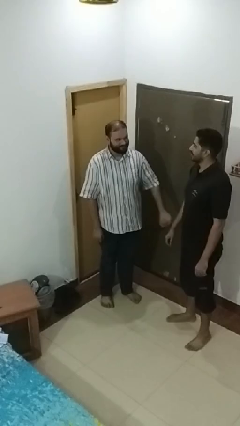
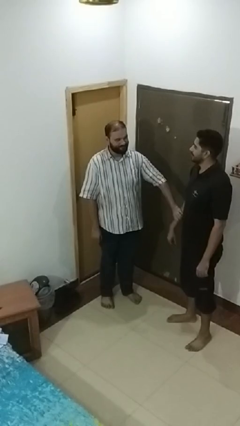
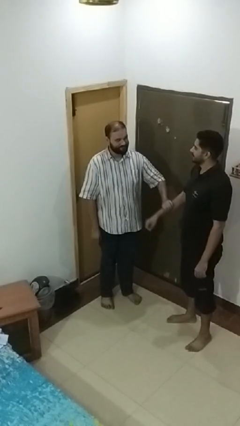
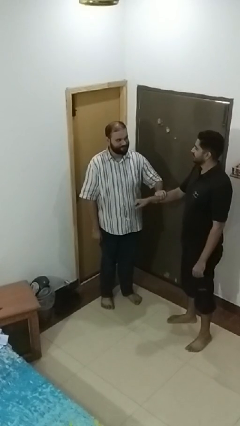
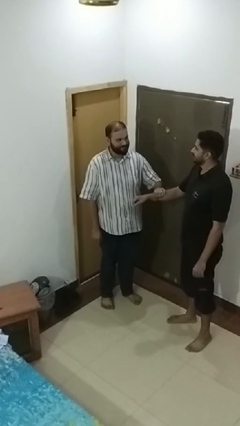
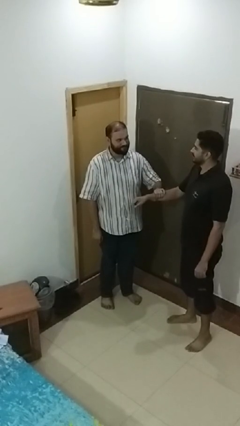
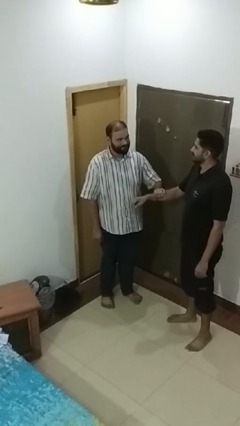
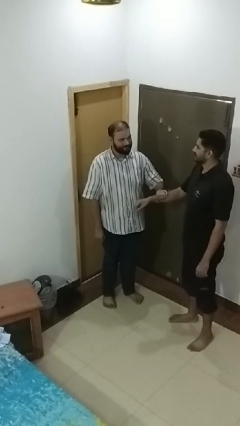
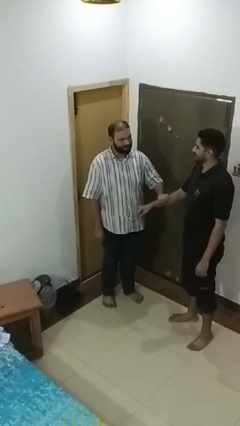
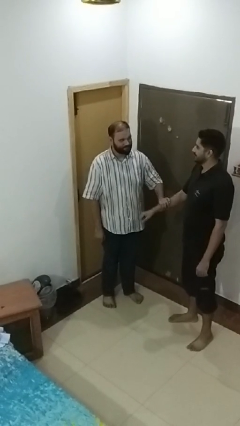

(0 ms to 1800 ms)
person grabs person by forearm

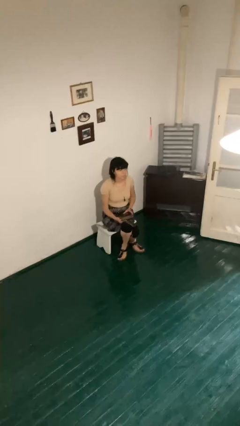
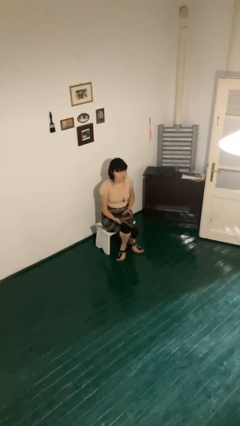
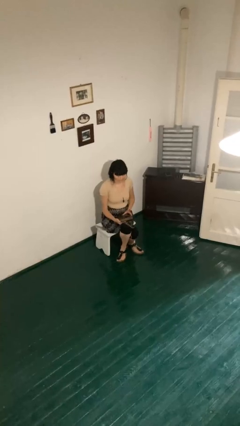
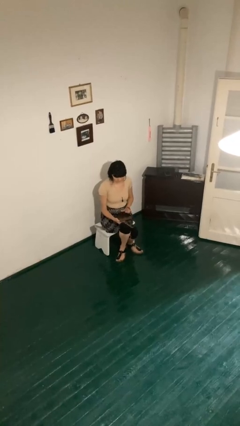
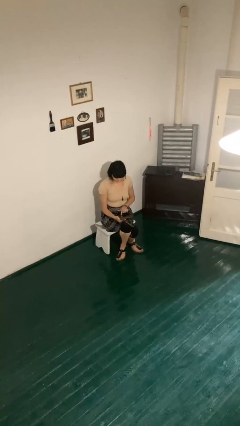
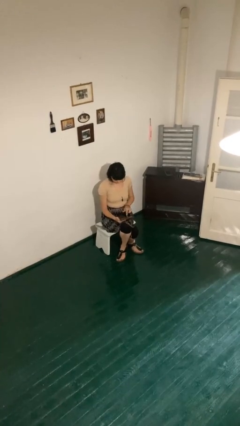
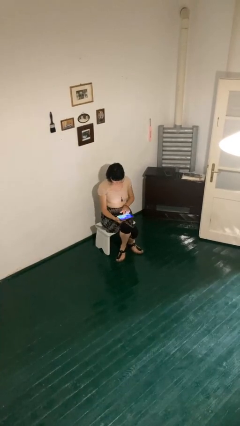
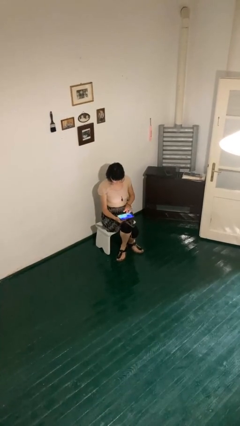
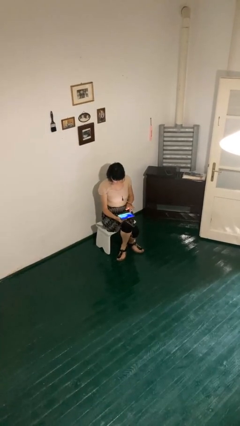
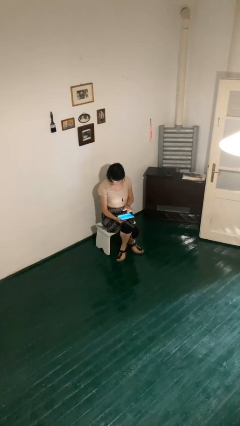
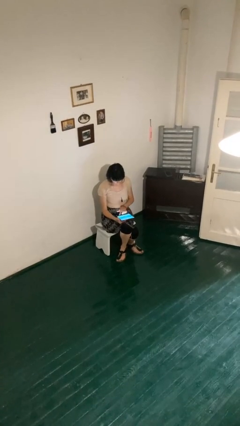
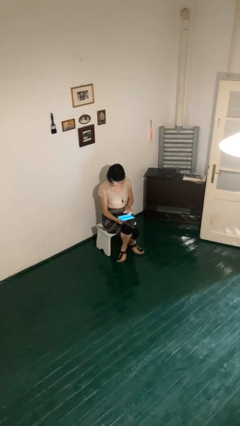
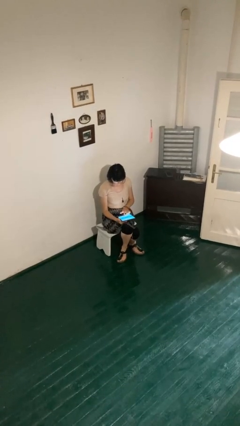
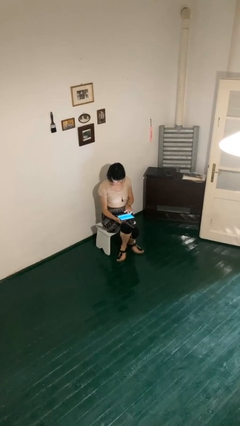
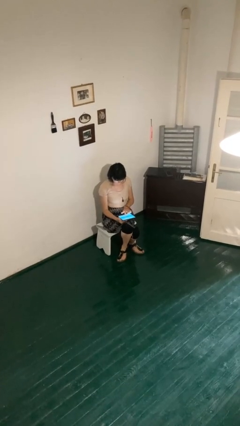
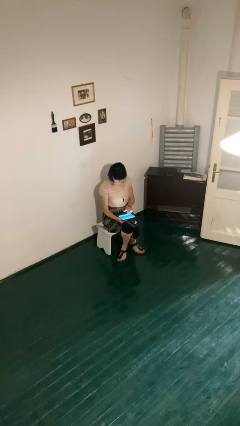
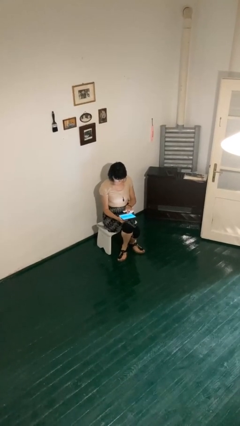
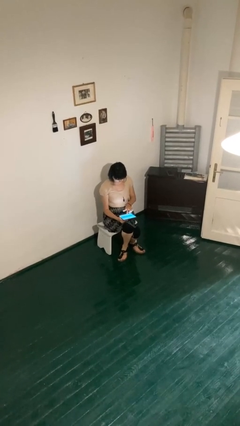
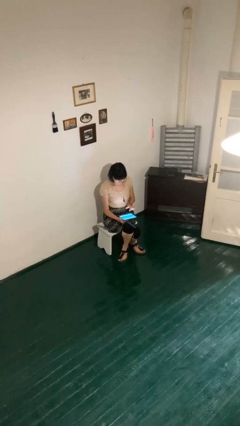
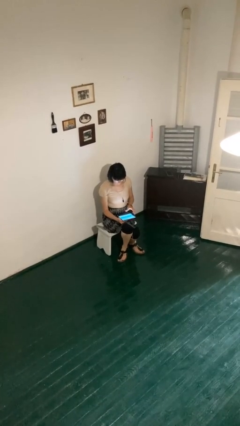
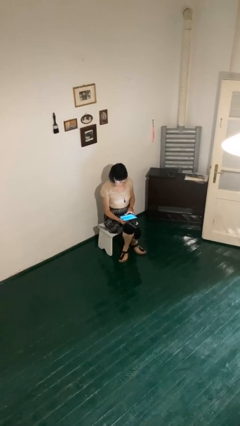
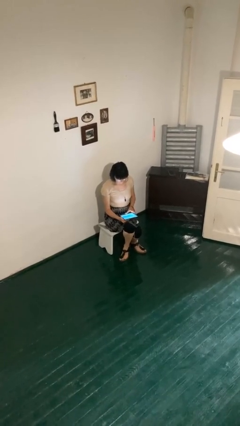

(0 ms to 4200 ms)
person interacts with tablet

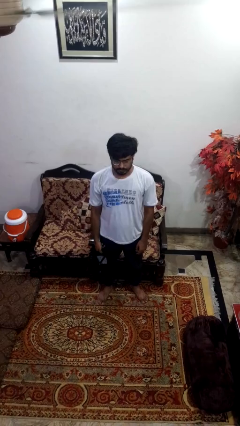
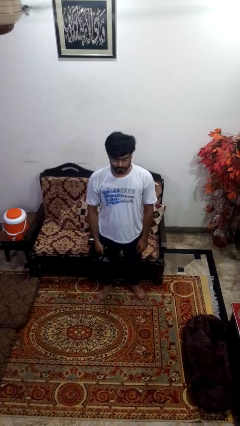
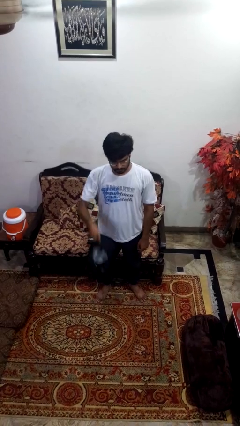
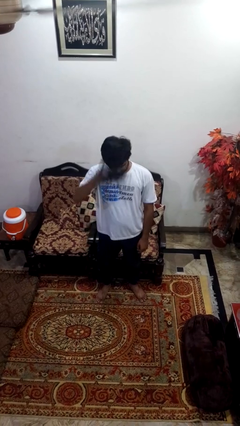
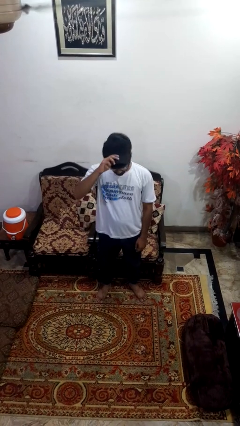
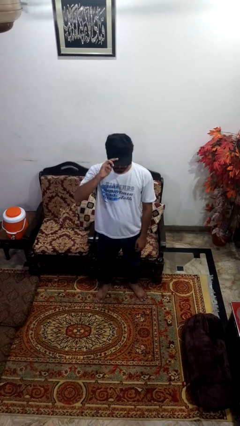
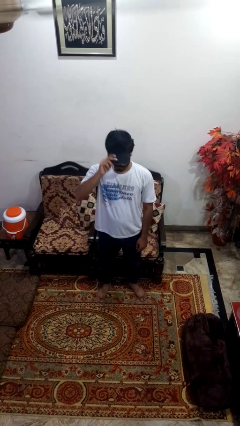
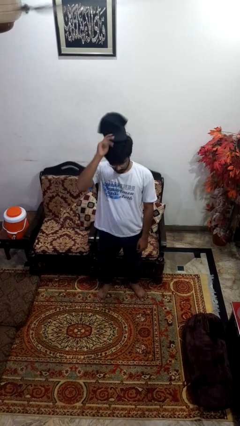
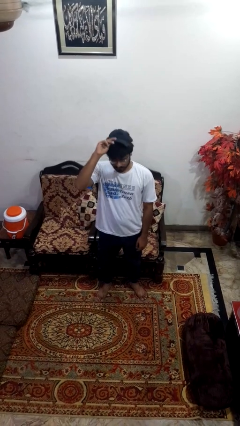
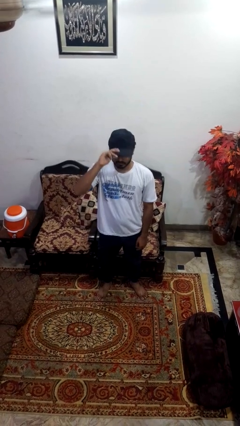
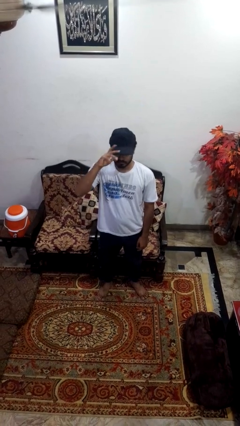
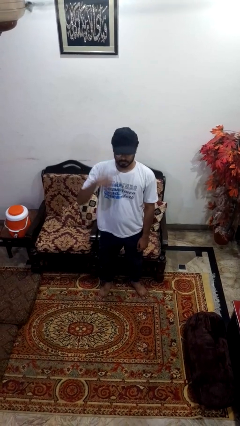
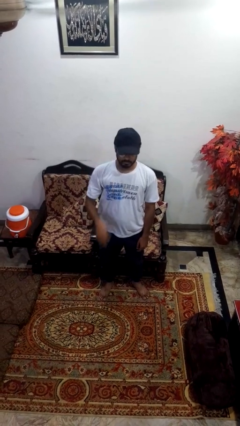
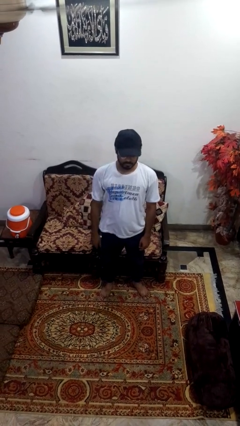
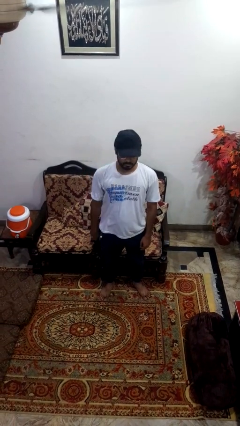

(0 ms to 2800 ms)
person puts on hat

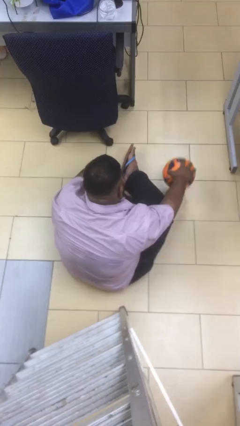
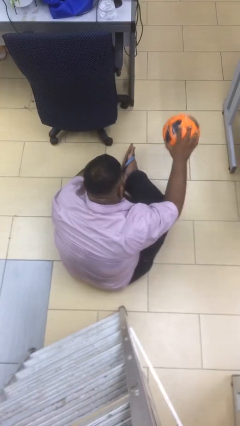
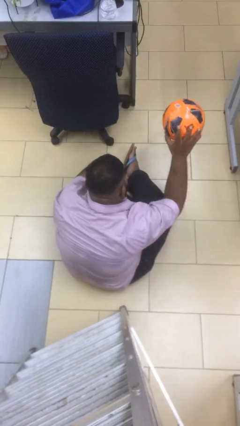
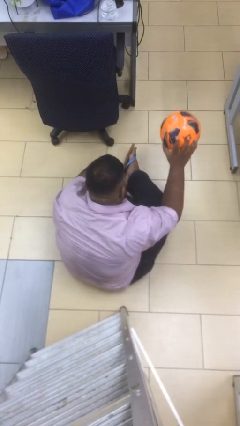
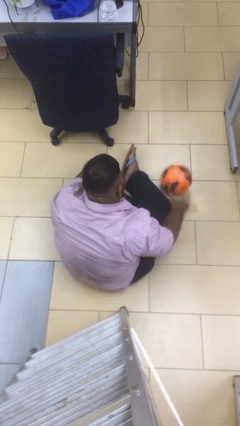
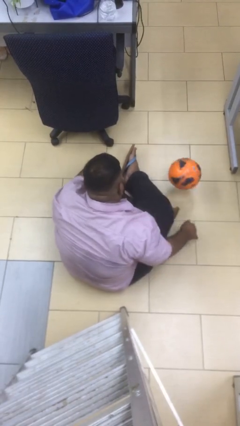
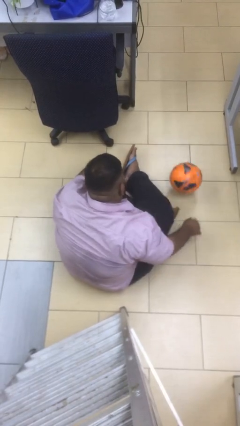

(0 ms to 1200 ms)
person bounces ball on floor

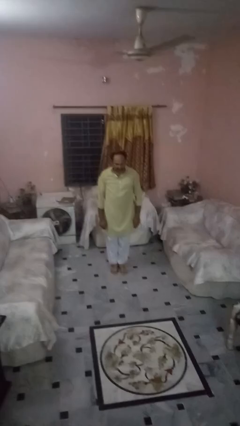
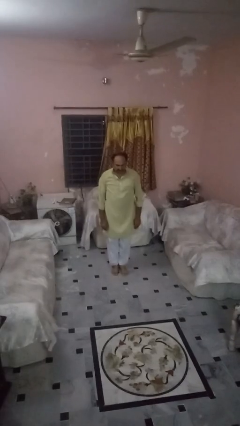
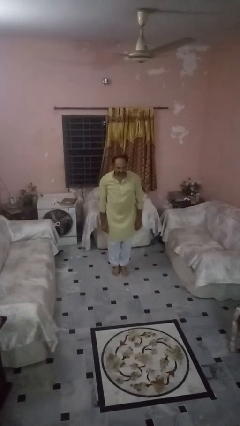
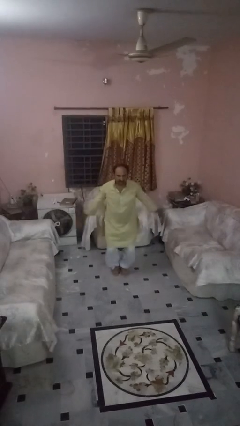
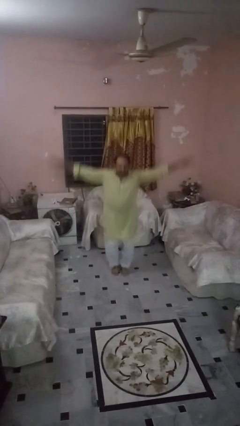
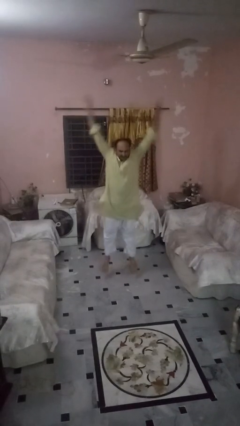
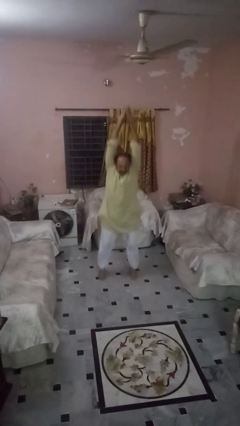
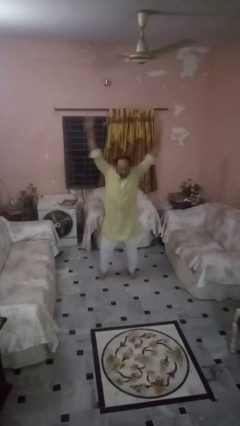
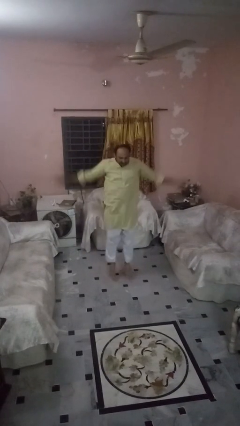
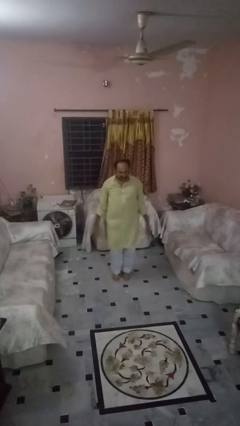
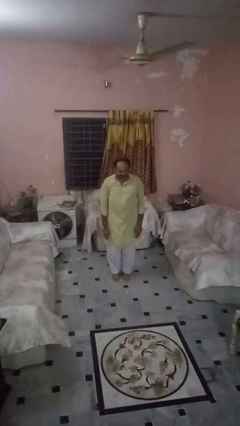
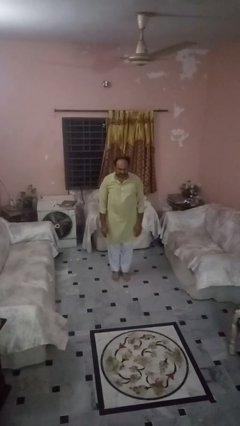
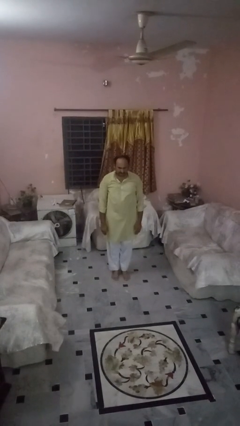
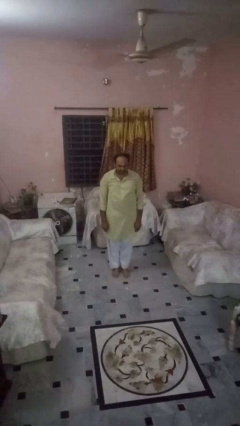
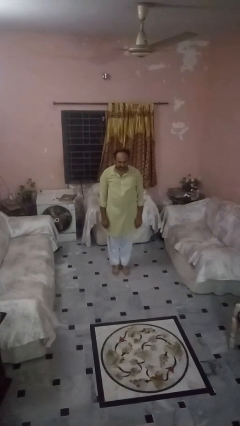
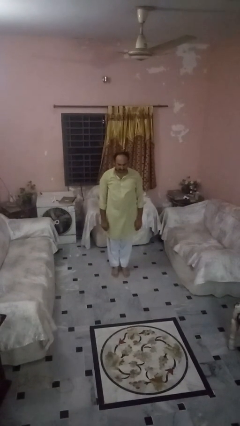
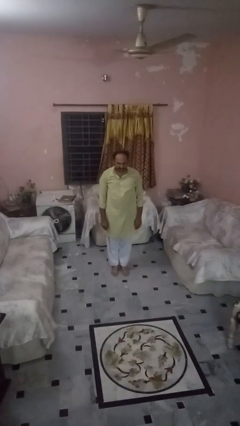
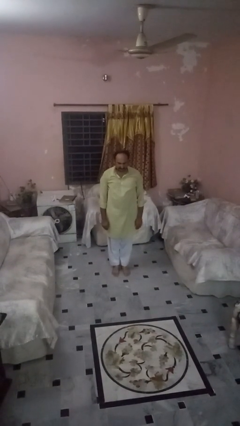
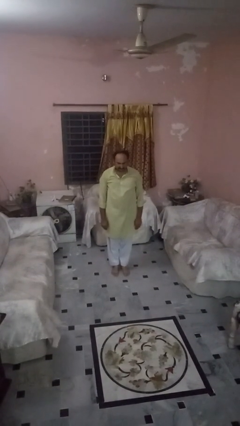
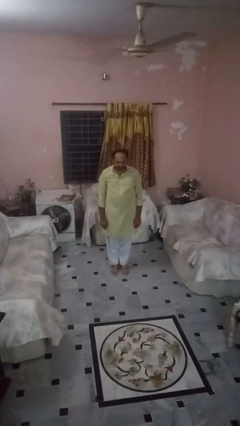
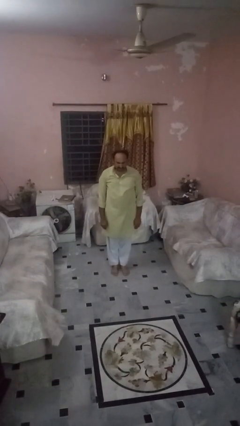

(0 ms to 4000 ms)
person exercises with jumping jacks

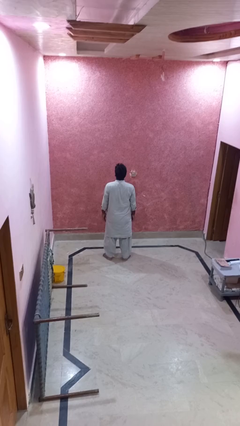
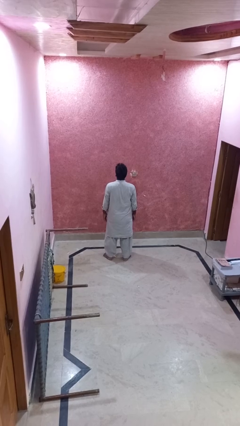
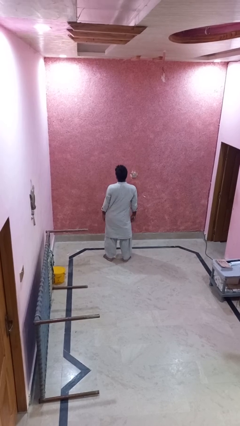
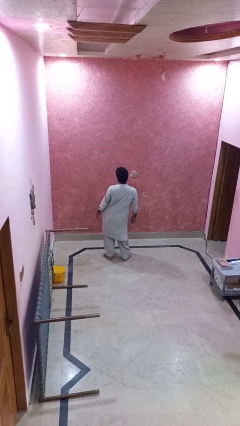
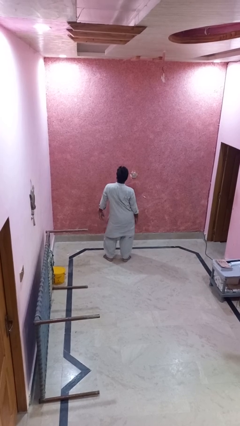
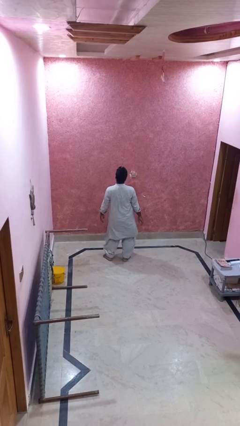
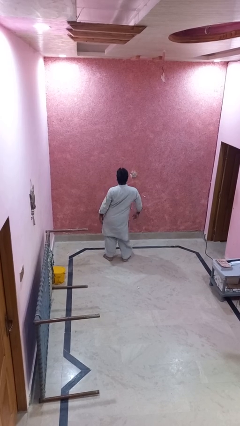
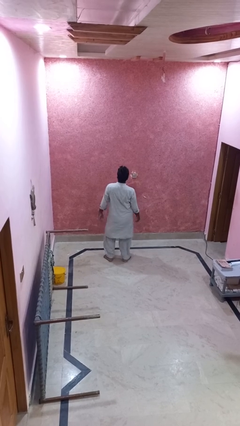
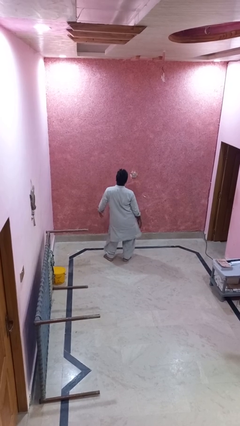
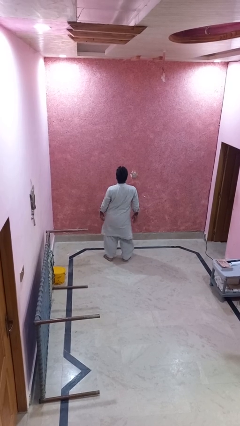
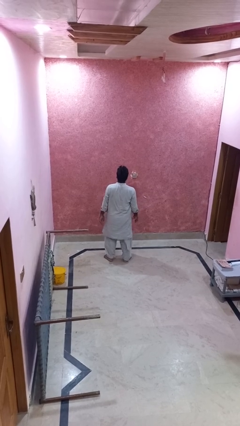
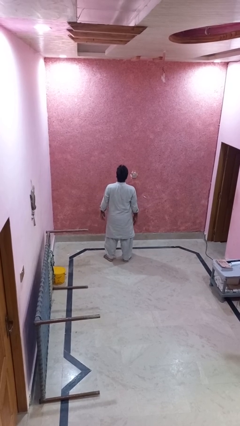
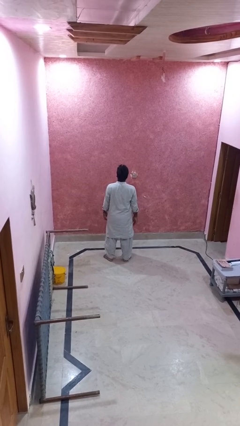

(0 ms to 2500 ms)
person wiggles hips

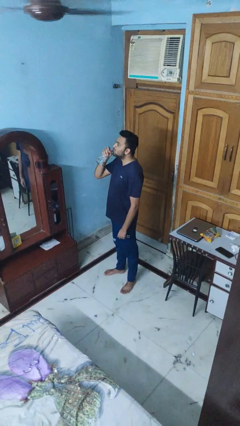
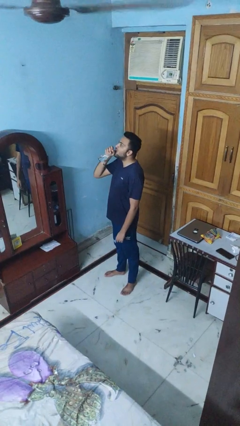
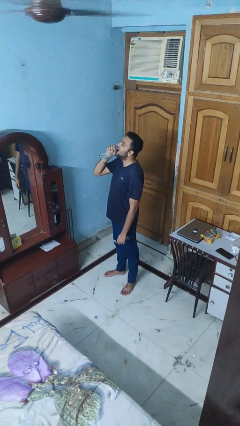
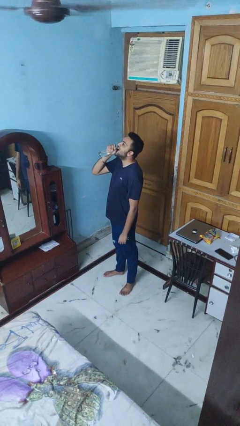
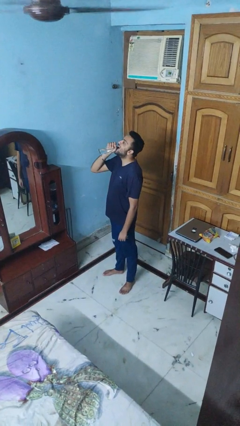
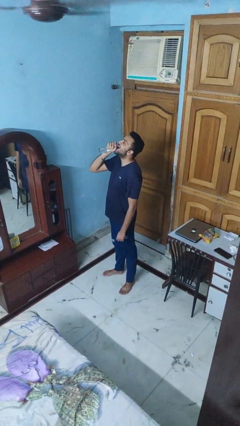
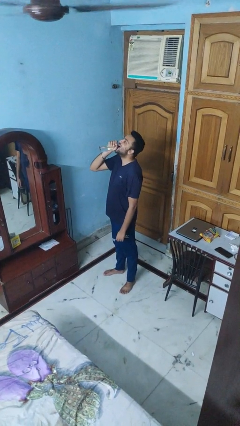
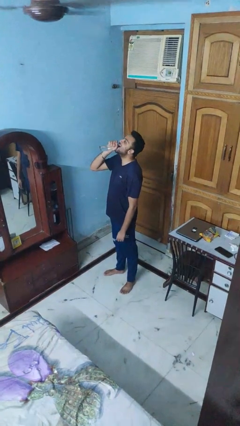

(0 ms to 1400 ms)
person drinks from bottle
